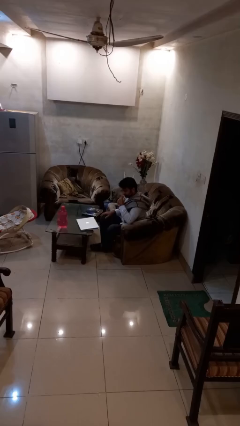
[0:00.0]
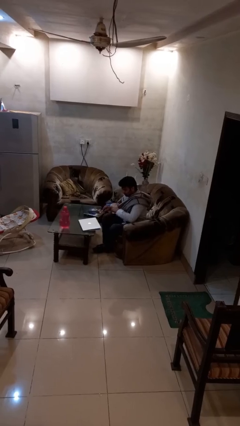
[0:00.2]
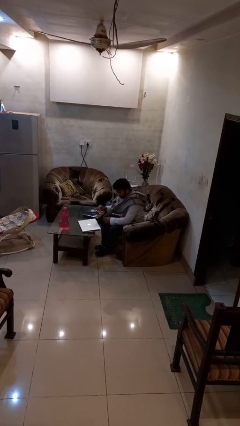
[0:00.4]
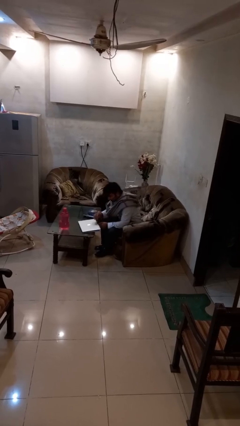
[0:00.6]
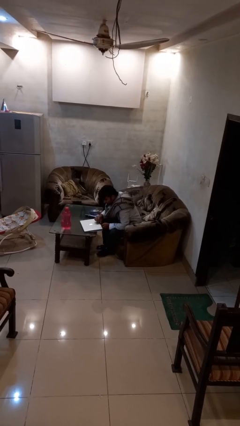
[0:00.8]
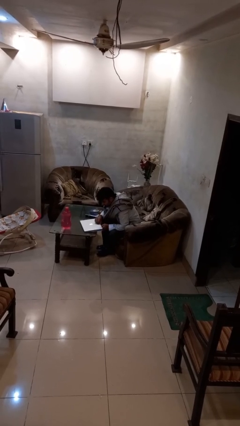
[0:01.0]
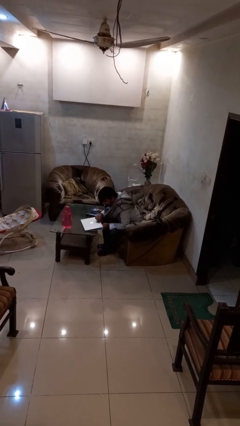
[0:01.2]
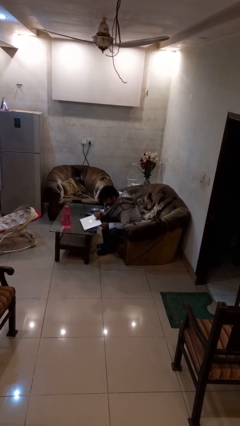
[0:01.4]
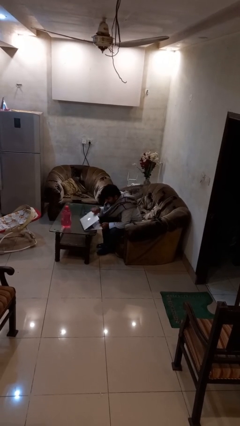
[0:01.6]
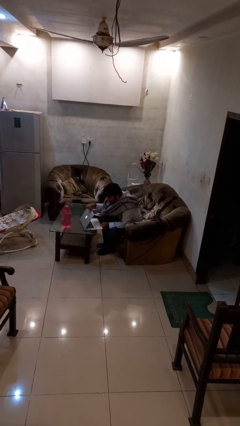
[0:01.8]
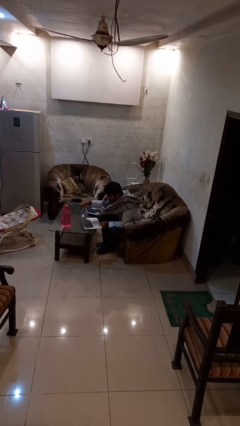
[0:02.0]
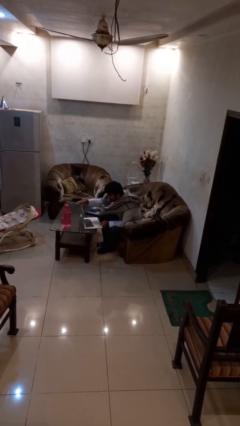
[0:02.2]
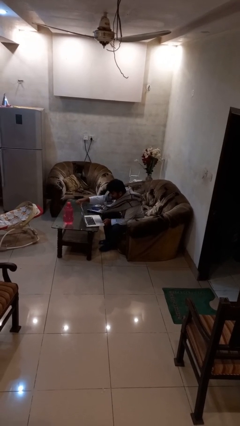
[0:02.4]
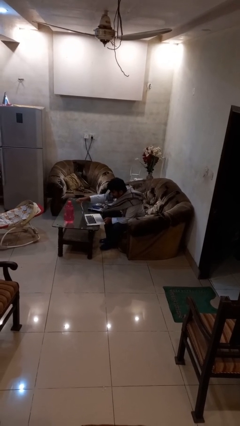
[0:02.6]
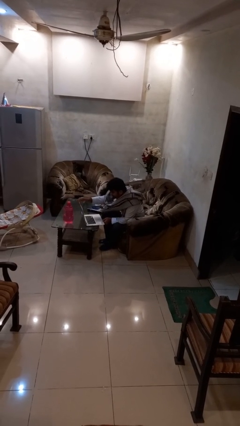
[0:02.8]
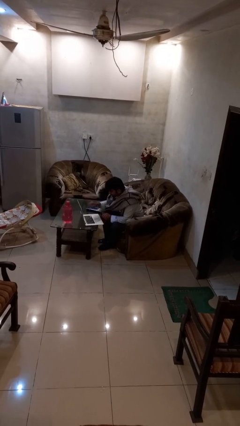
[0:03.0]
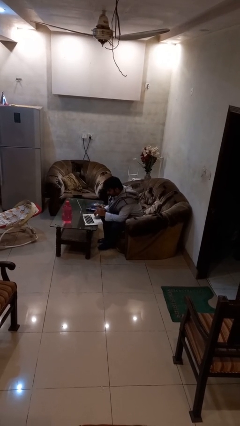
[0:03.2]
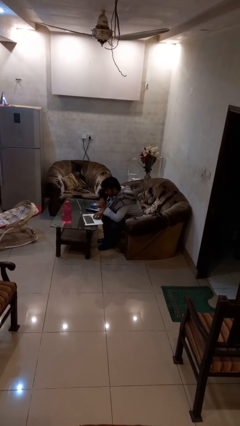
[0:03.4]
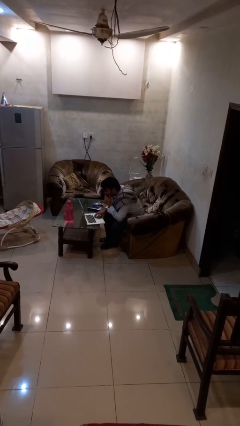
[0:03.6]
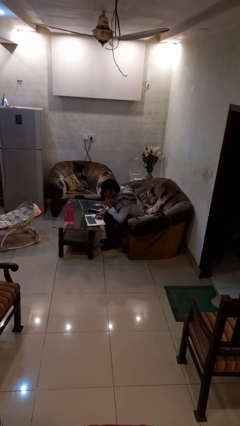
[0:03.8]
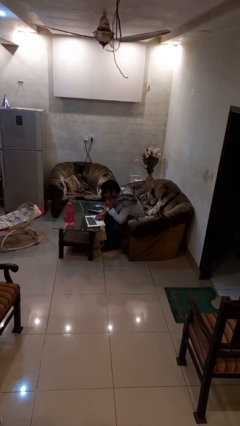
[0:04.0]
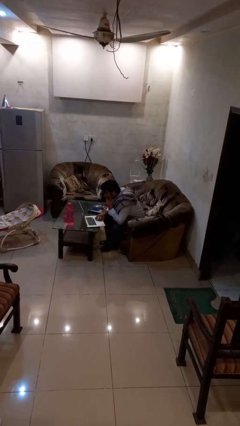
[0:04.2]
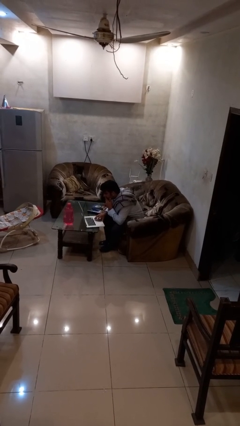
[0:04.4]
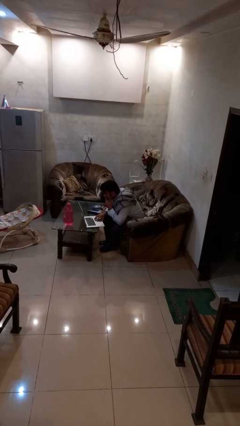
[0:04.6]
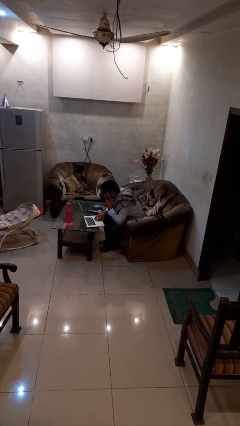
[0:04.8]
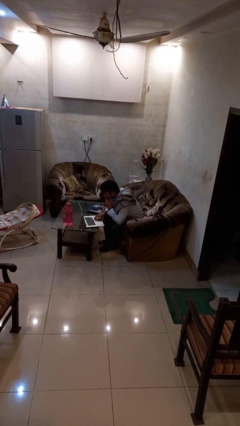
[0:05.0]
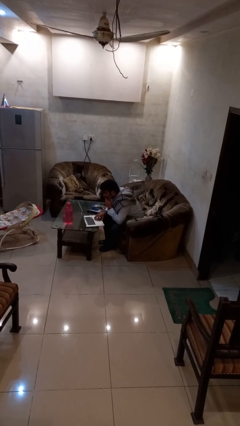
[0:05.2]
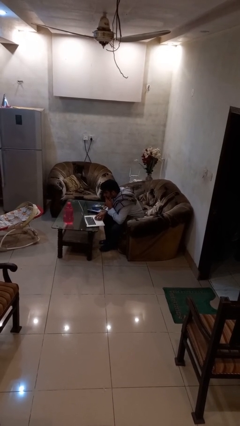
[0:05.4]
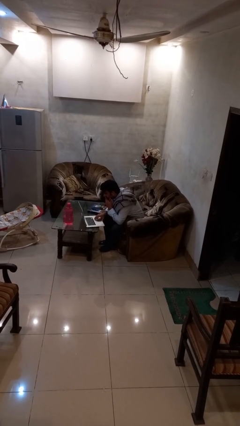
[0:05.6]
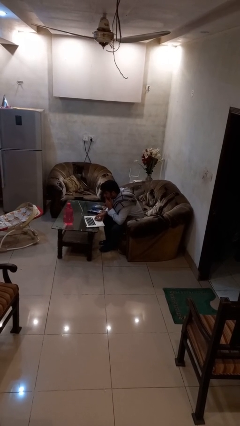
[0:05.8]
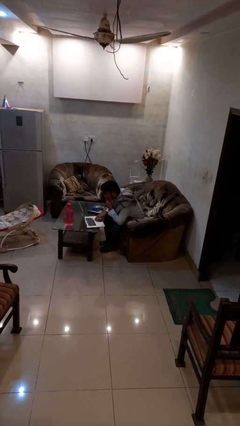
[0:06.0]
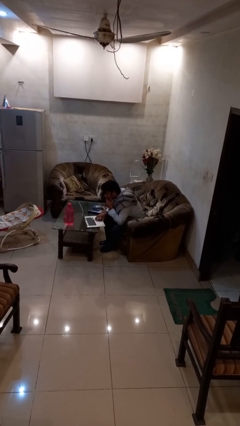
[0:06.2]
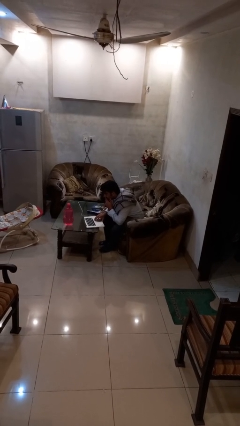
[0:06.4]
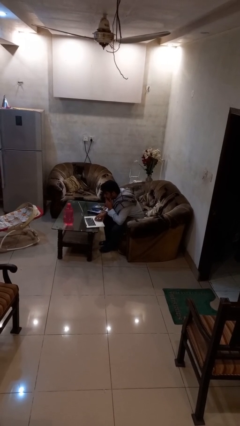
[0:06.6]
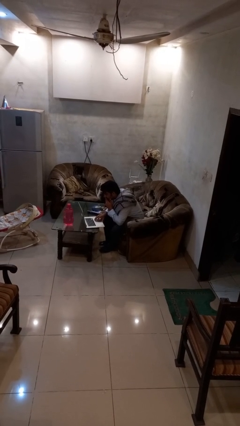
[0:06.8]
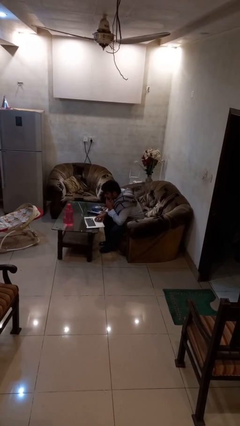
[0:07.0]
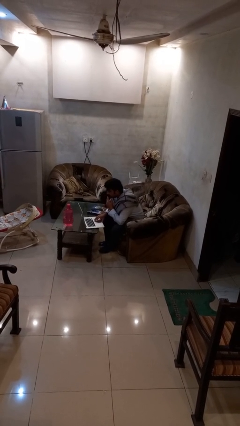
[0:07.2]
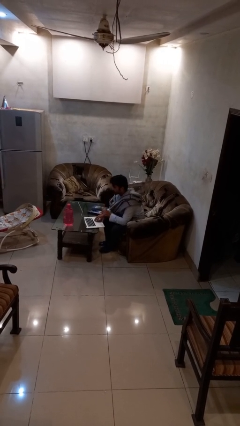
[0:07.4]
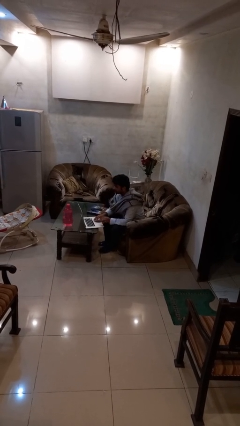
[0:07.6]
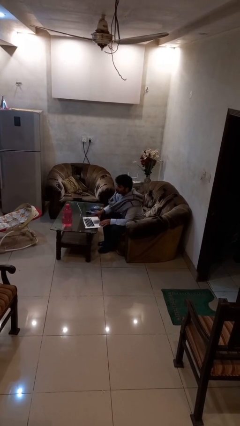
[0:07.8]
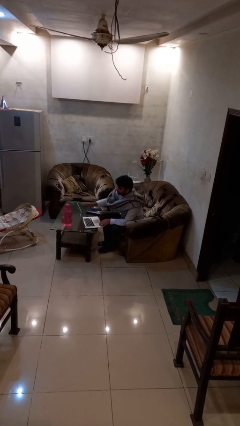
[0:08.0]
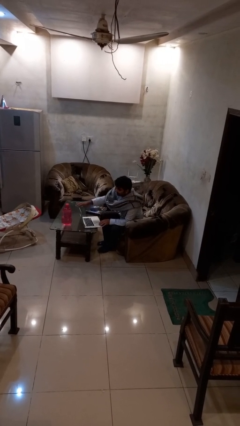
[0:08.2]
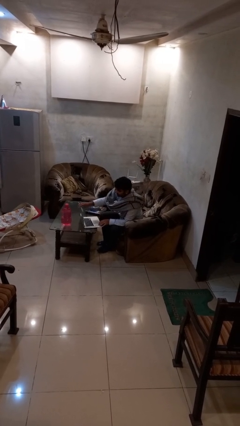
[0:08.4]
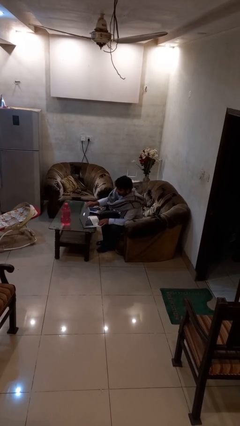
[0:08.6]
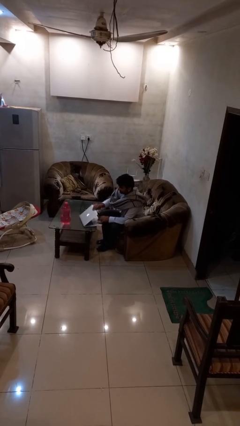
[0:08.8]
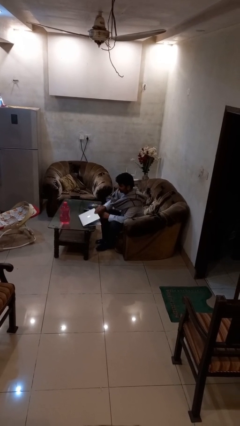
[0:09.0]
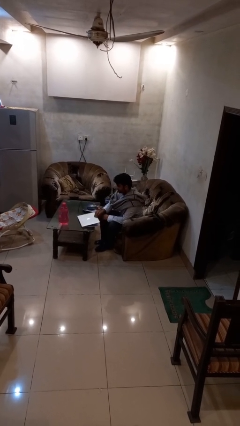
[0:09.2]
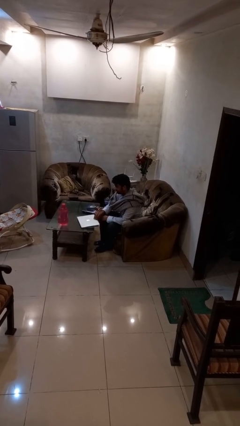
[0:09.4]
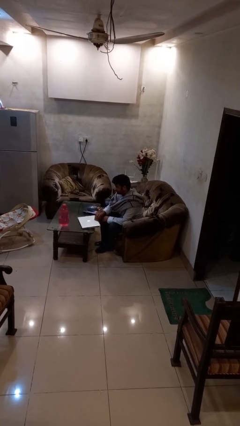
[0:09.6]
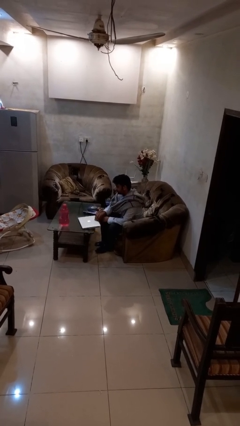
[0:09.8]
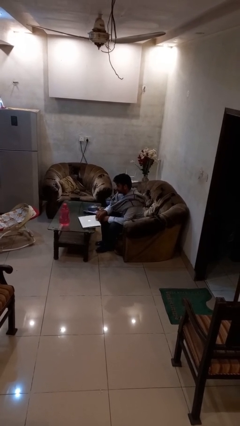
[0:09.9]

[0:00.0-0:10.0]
person interacts with laptop

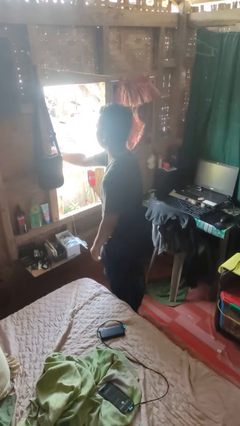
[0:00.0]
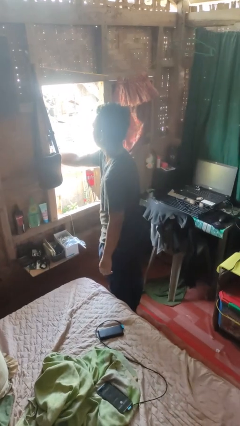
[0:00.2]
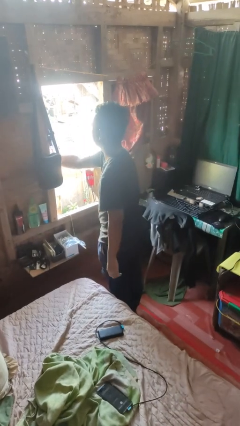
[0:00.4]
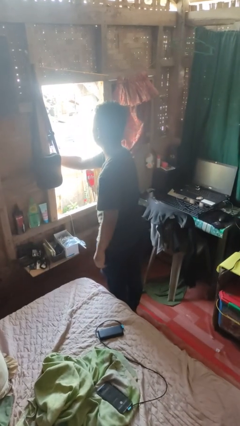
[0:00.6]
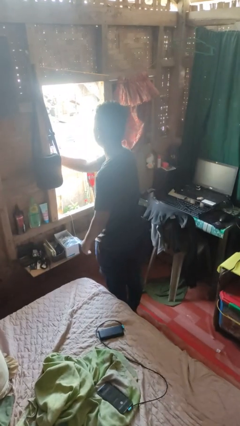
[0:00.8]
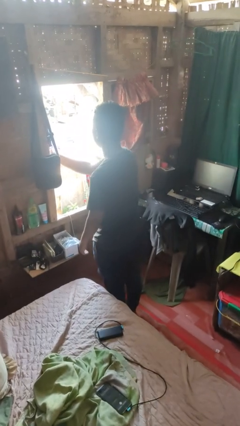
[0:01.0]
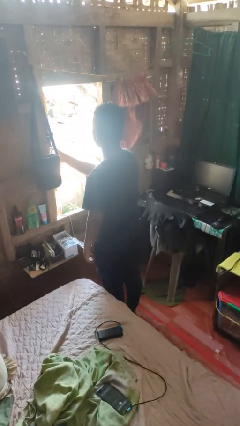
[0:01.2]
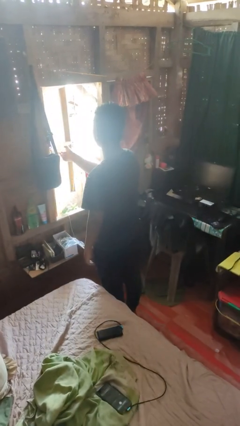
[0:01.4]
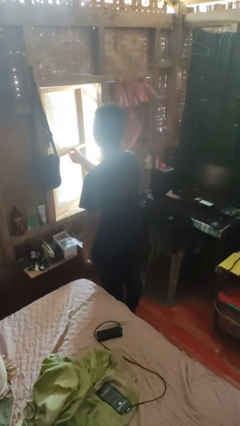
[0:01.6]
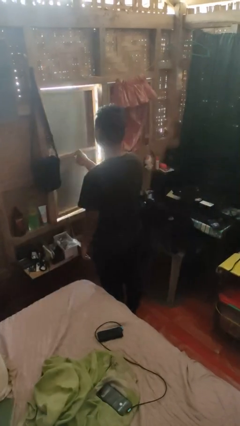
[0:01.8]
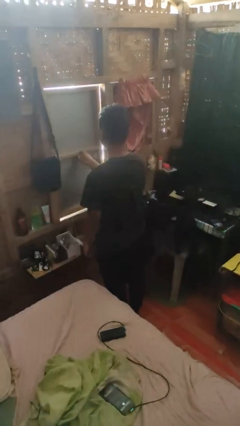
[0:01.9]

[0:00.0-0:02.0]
person closes home window

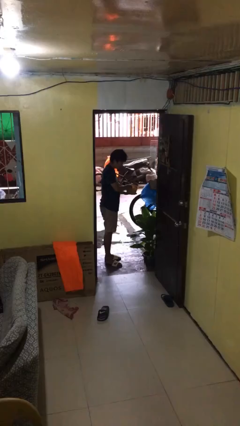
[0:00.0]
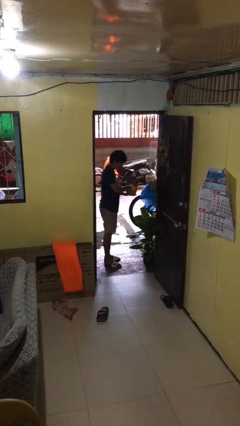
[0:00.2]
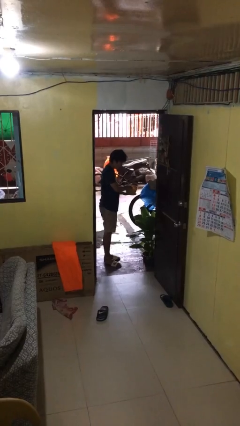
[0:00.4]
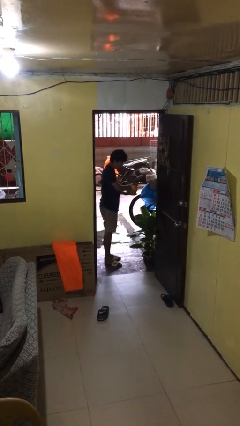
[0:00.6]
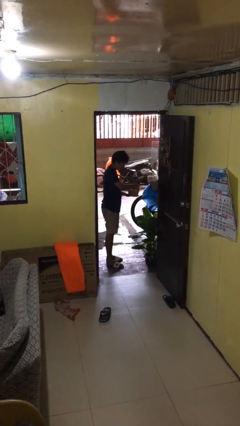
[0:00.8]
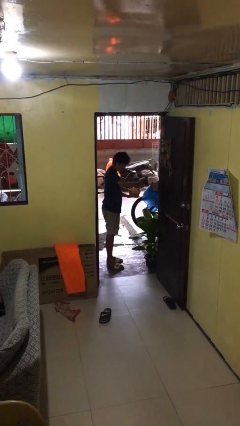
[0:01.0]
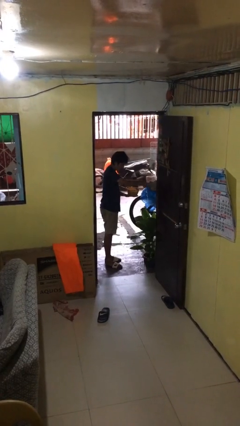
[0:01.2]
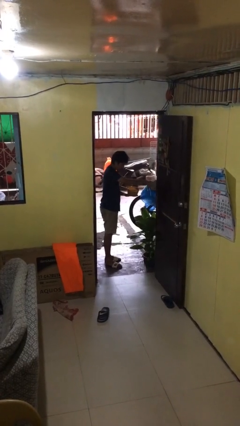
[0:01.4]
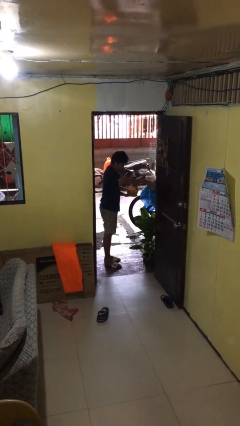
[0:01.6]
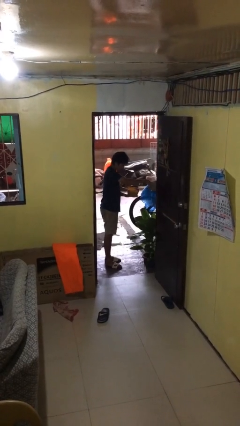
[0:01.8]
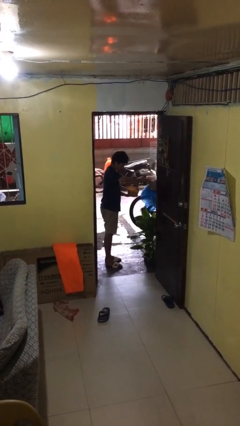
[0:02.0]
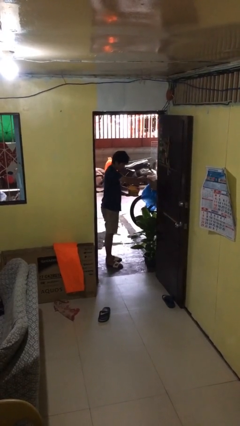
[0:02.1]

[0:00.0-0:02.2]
person waters houseplant

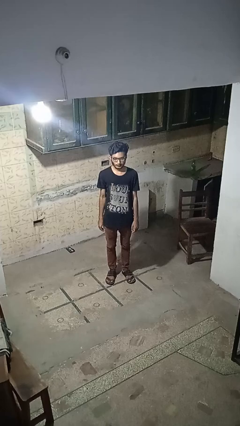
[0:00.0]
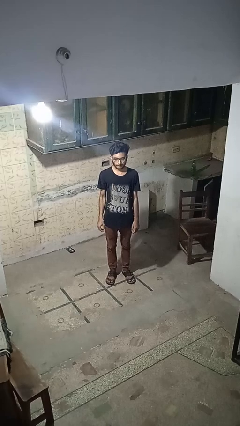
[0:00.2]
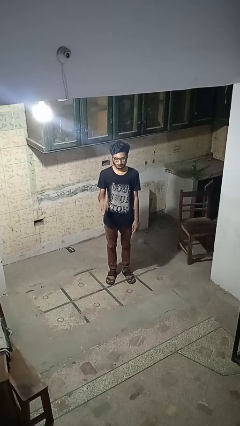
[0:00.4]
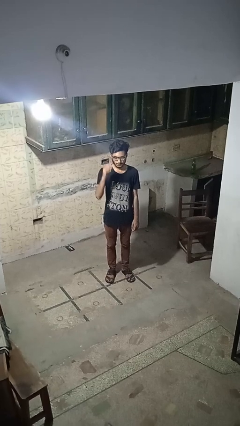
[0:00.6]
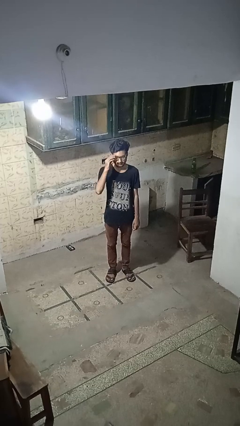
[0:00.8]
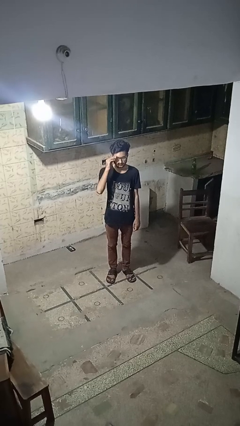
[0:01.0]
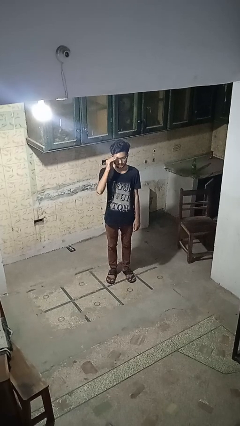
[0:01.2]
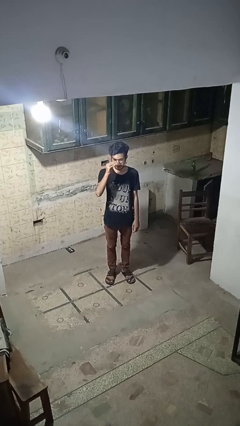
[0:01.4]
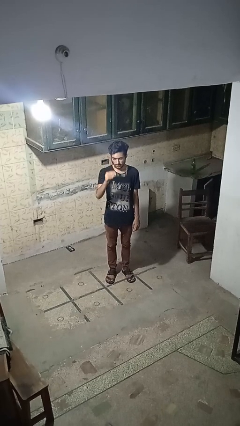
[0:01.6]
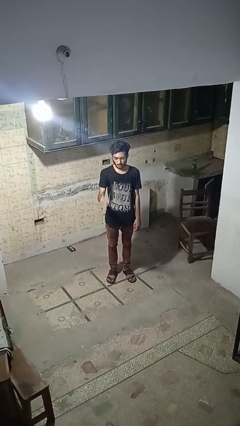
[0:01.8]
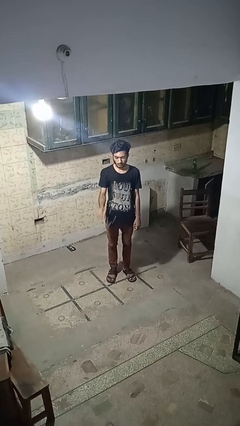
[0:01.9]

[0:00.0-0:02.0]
person takes off glasses

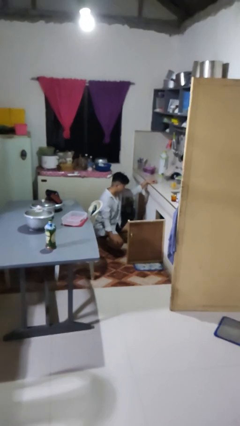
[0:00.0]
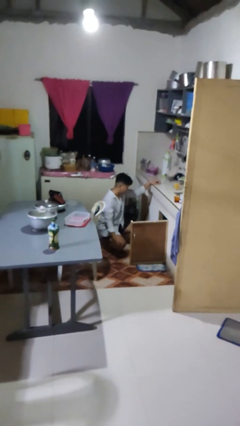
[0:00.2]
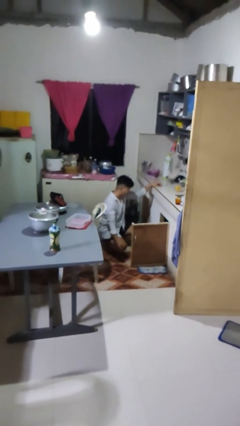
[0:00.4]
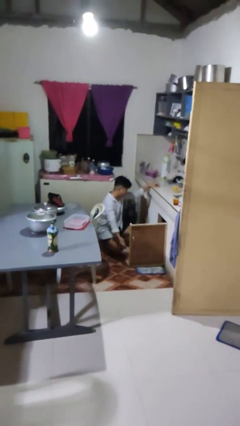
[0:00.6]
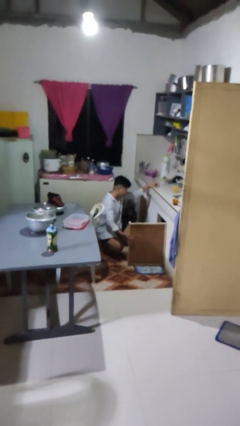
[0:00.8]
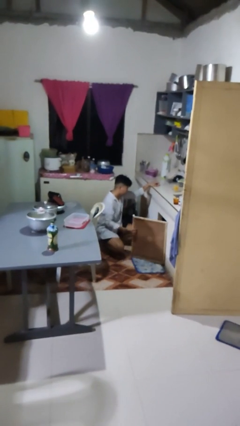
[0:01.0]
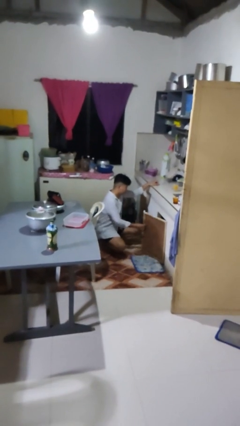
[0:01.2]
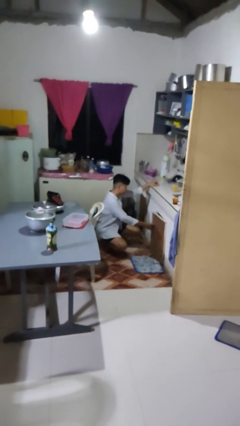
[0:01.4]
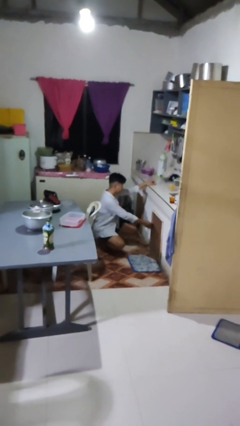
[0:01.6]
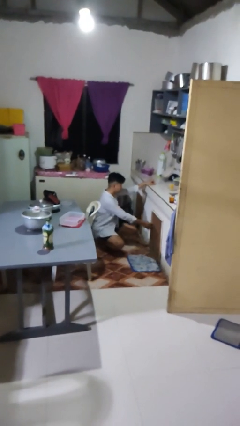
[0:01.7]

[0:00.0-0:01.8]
person closes cabinet

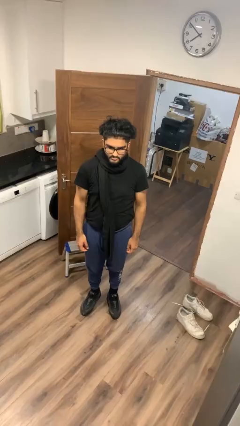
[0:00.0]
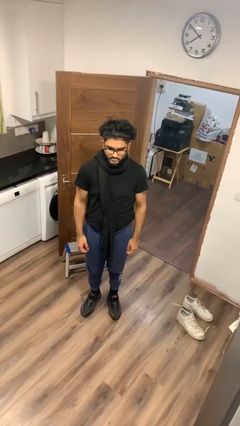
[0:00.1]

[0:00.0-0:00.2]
person takes off scarf
